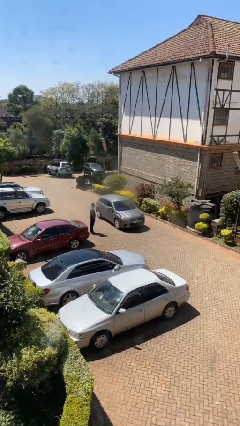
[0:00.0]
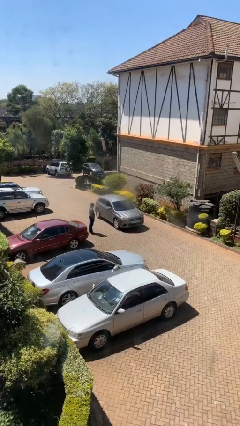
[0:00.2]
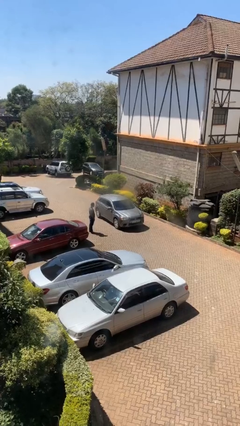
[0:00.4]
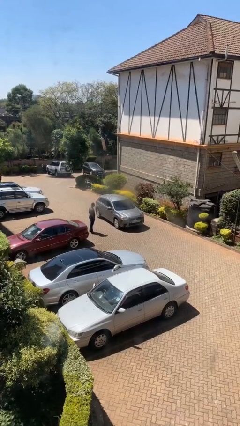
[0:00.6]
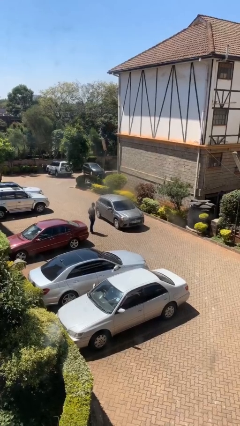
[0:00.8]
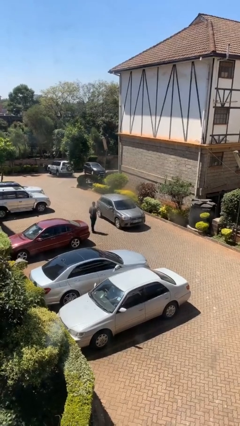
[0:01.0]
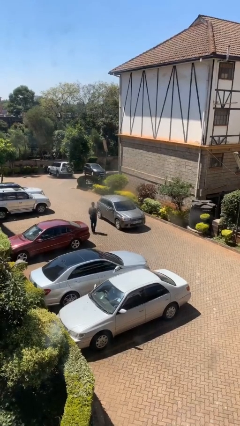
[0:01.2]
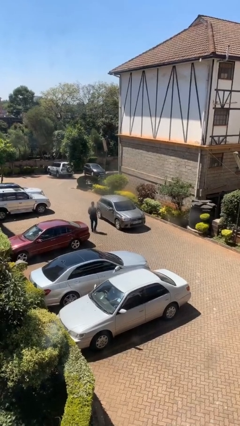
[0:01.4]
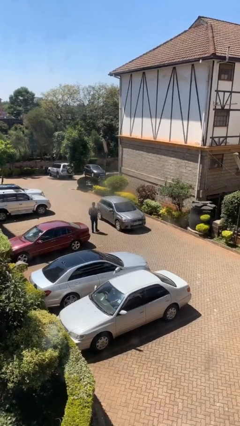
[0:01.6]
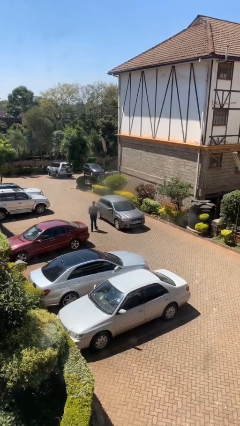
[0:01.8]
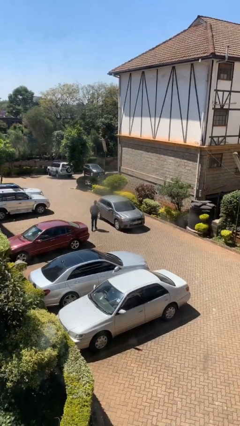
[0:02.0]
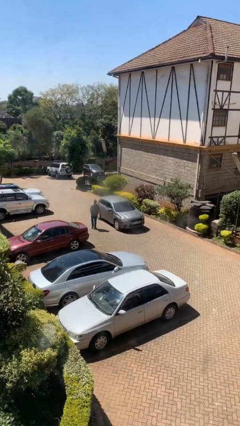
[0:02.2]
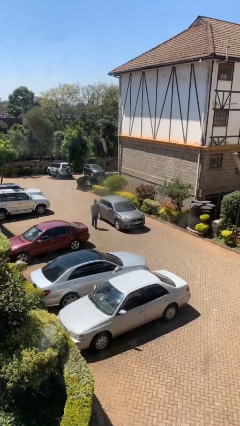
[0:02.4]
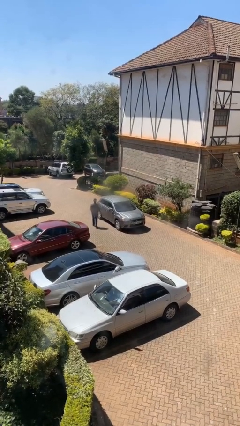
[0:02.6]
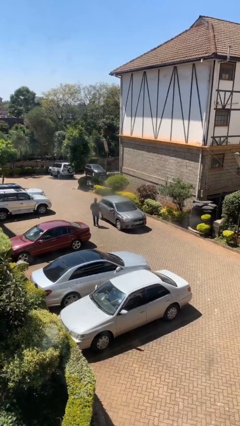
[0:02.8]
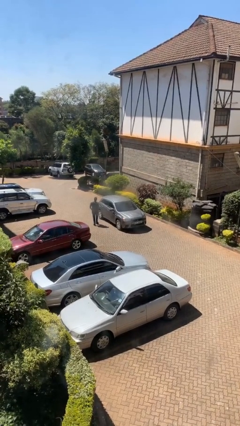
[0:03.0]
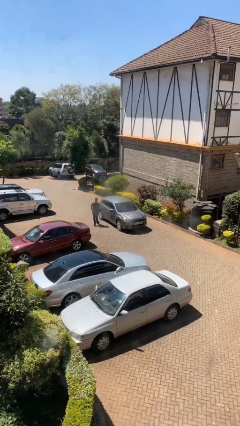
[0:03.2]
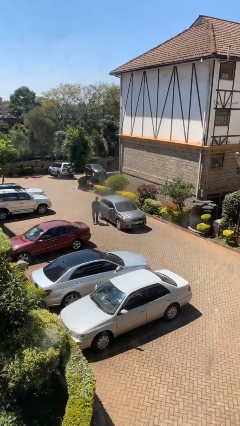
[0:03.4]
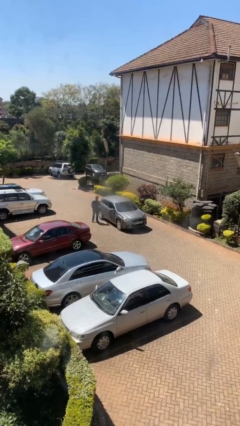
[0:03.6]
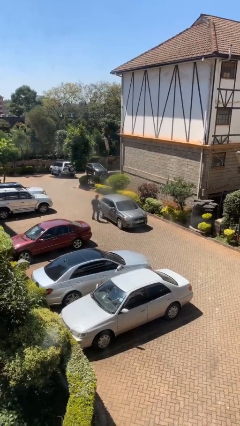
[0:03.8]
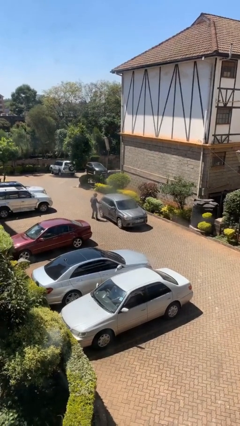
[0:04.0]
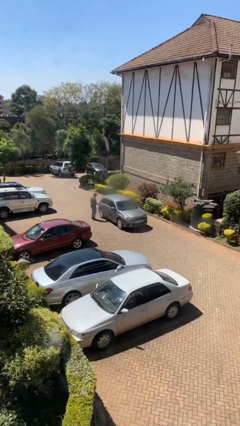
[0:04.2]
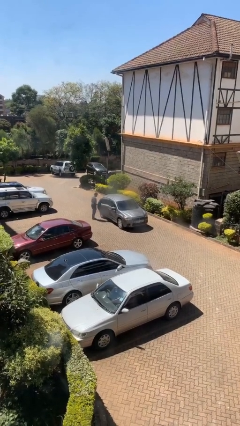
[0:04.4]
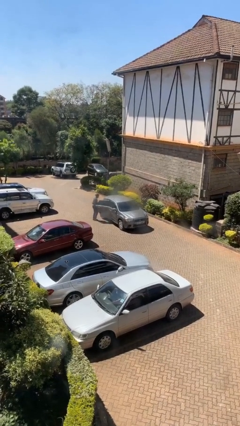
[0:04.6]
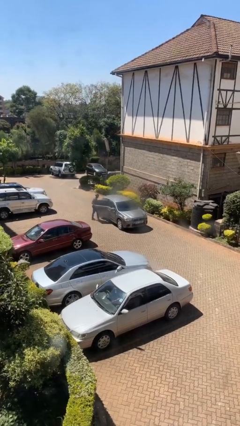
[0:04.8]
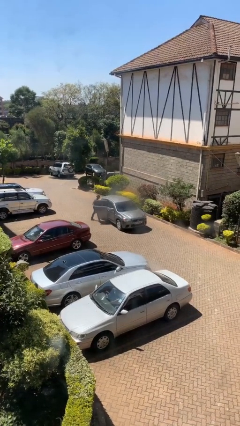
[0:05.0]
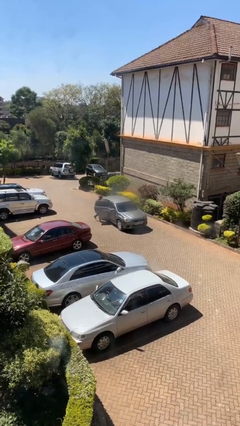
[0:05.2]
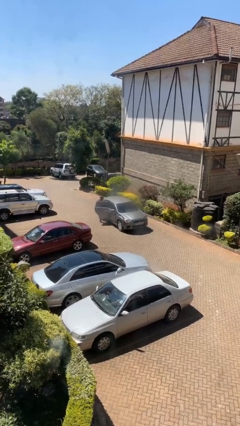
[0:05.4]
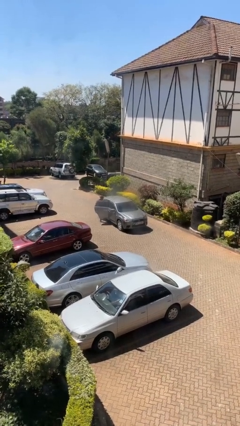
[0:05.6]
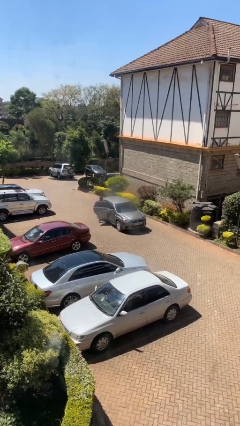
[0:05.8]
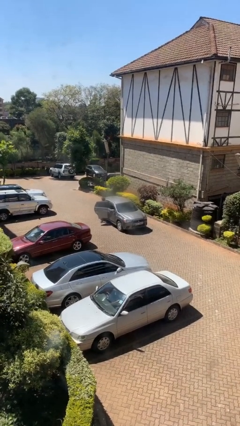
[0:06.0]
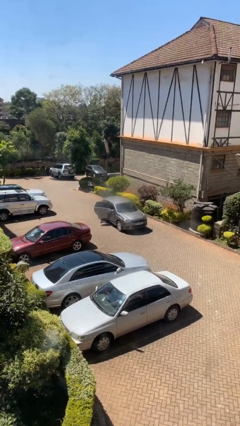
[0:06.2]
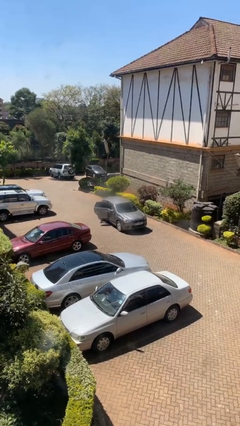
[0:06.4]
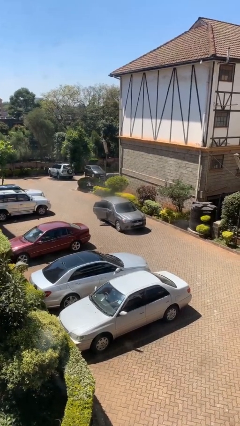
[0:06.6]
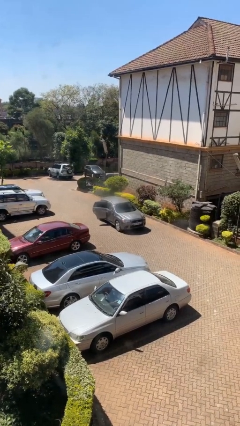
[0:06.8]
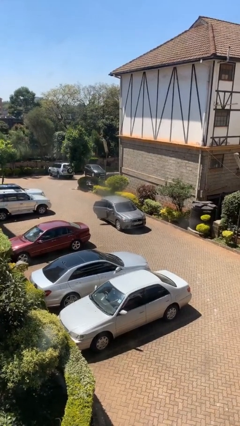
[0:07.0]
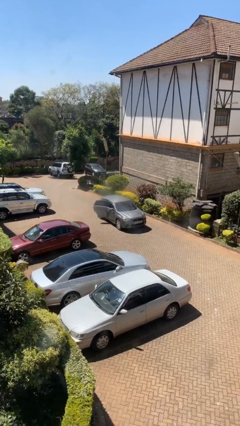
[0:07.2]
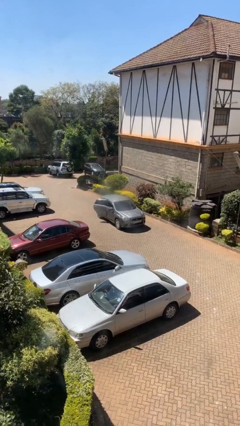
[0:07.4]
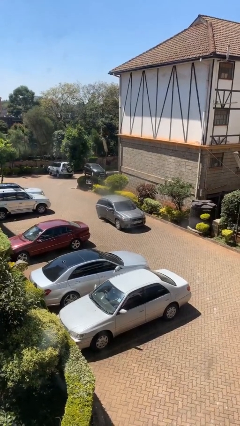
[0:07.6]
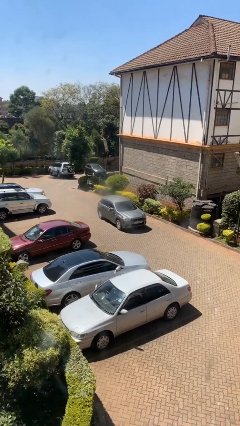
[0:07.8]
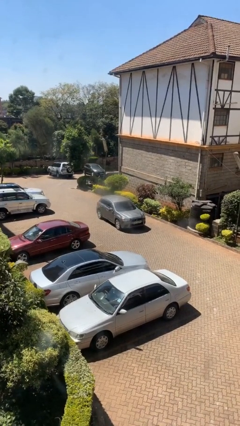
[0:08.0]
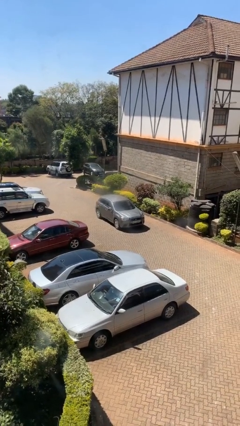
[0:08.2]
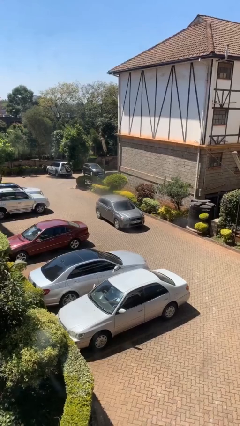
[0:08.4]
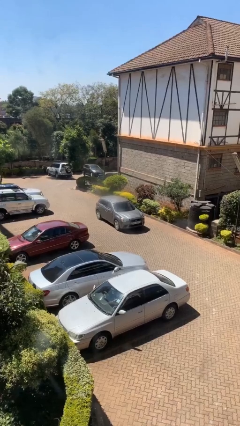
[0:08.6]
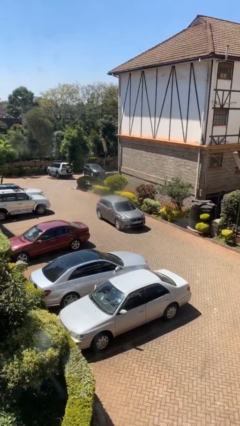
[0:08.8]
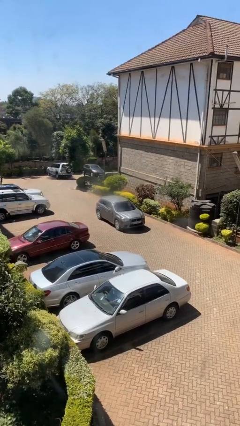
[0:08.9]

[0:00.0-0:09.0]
car picks up person

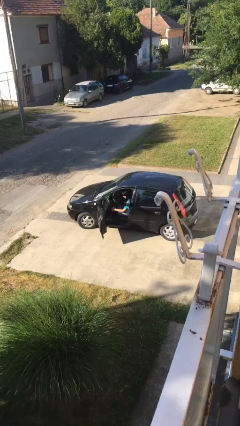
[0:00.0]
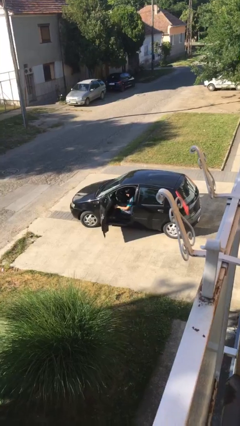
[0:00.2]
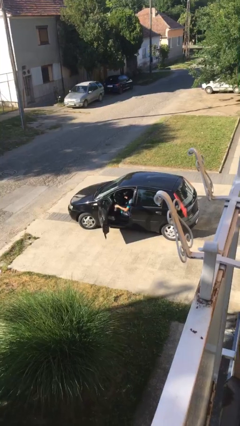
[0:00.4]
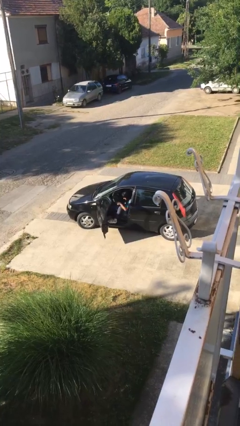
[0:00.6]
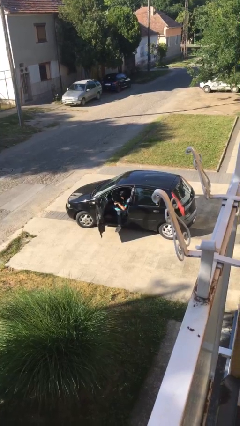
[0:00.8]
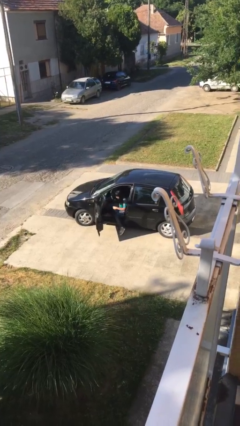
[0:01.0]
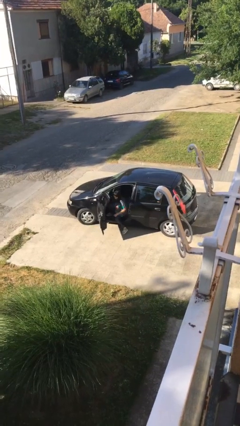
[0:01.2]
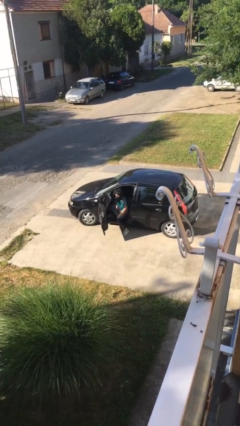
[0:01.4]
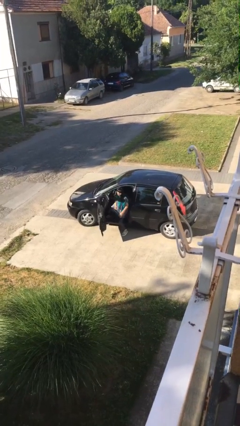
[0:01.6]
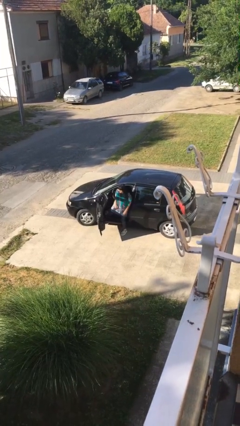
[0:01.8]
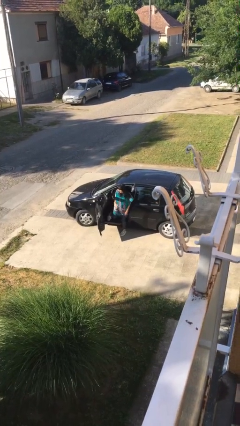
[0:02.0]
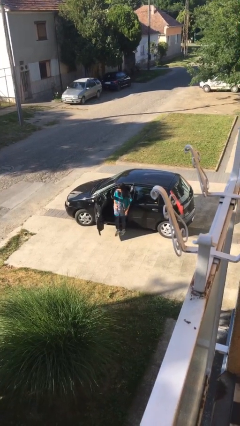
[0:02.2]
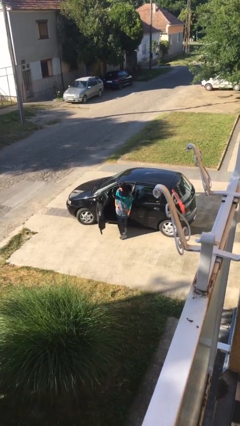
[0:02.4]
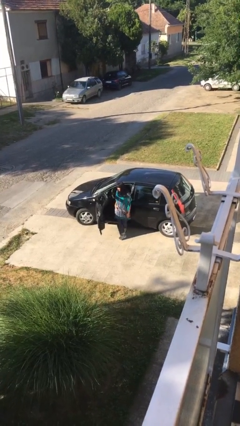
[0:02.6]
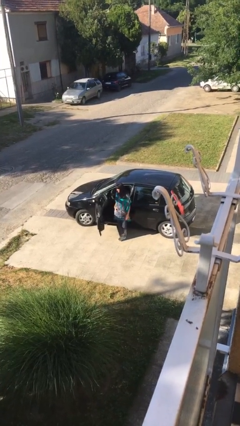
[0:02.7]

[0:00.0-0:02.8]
person exits car

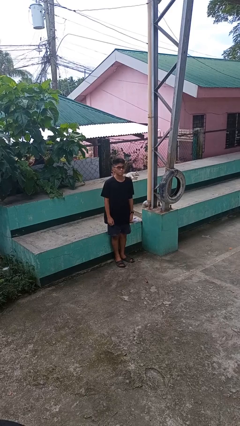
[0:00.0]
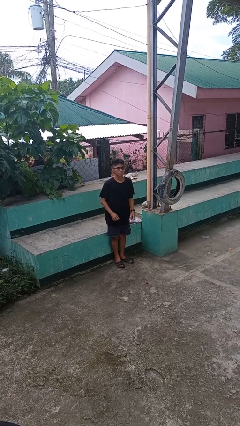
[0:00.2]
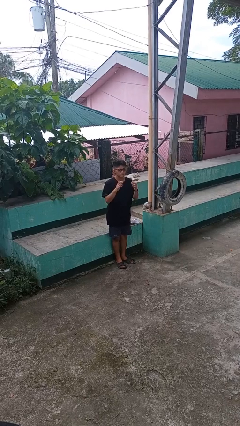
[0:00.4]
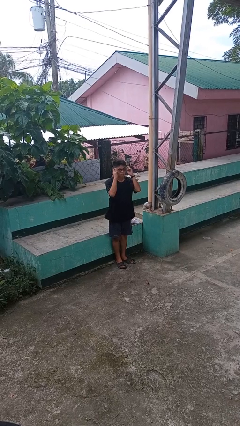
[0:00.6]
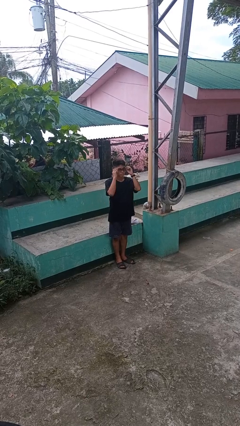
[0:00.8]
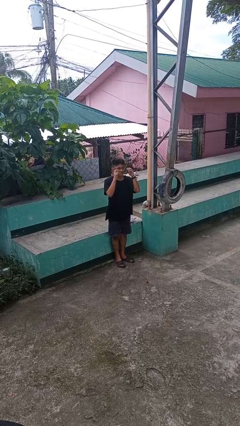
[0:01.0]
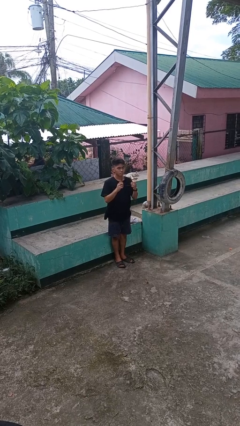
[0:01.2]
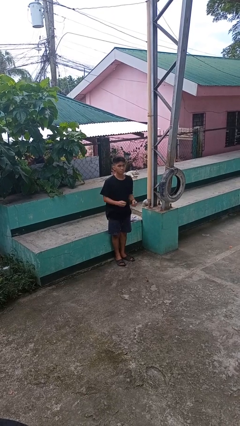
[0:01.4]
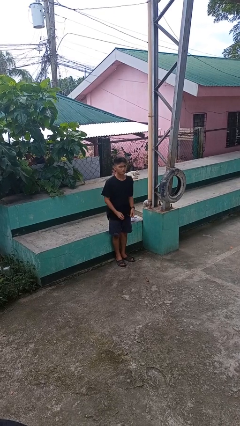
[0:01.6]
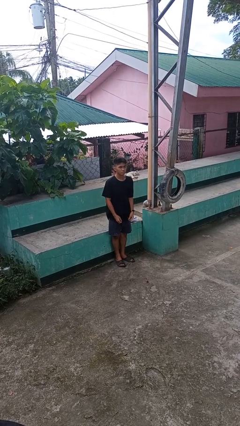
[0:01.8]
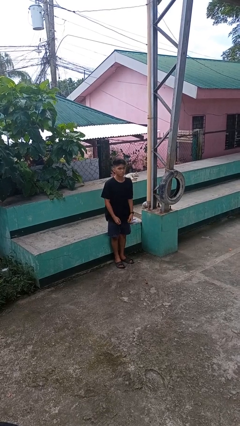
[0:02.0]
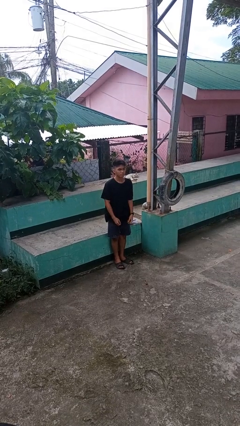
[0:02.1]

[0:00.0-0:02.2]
person takes off glasses

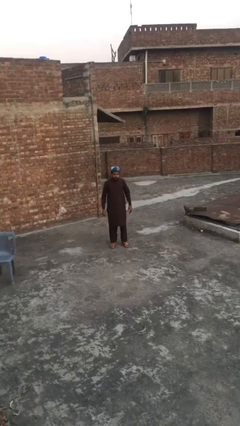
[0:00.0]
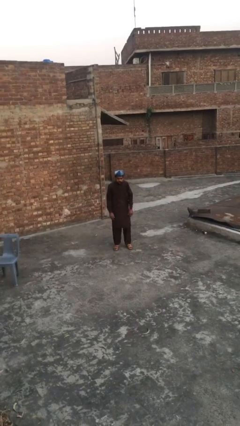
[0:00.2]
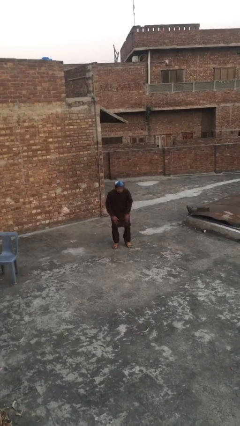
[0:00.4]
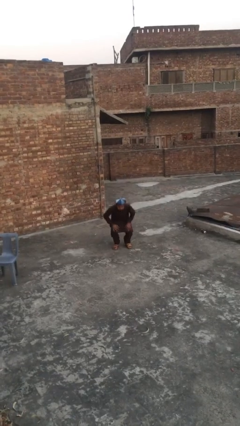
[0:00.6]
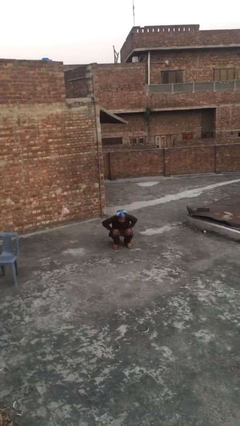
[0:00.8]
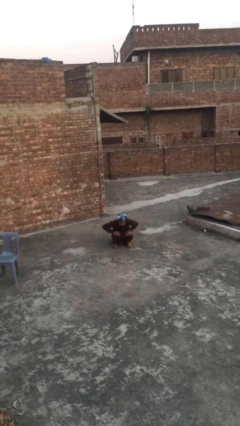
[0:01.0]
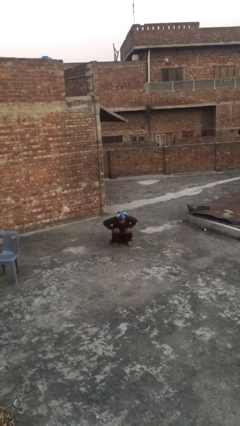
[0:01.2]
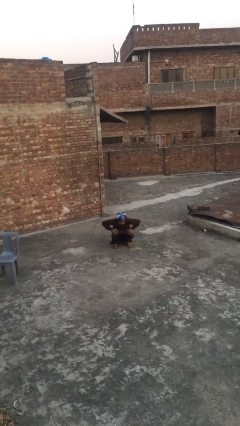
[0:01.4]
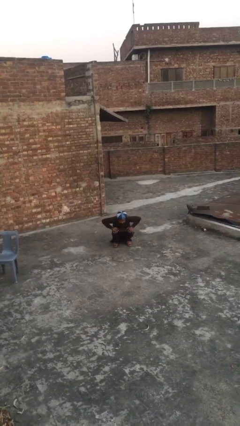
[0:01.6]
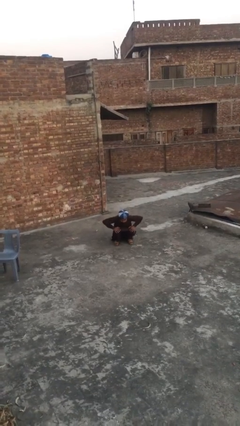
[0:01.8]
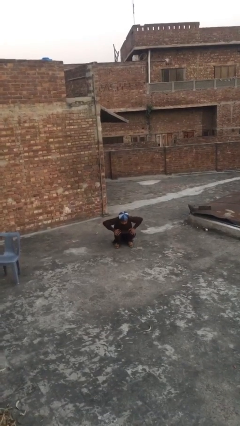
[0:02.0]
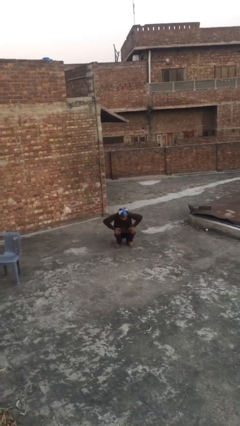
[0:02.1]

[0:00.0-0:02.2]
person sits down

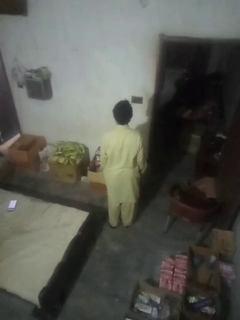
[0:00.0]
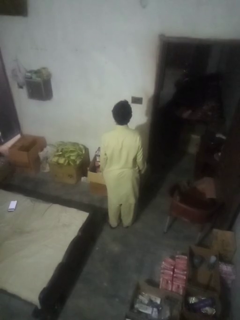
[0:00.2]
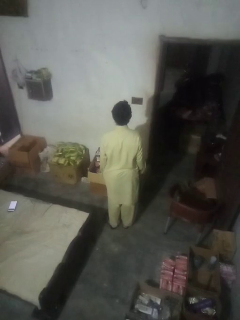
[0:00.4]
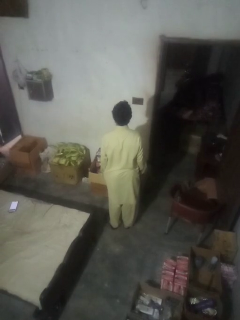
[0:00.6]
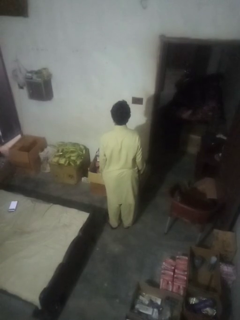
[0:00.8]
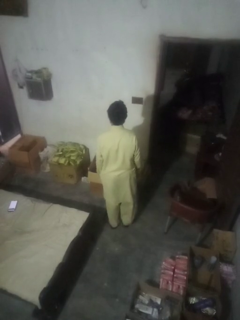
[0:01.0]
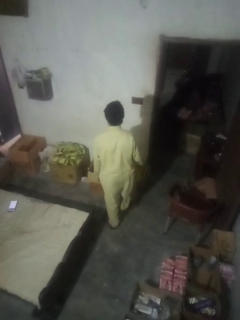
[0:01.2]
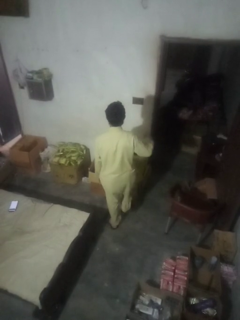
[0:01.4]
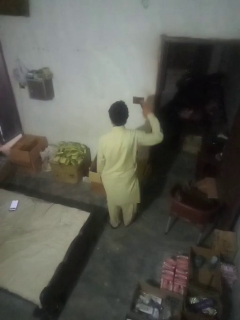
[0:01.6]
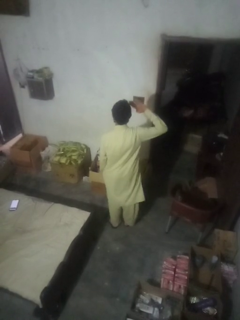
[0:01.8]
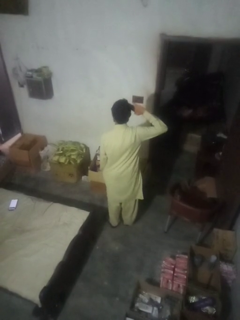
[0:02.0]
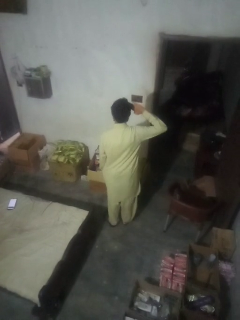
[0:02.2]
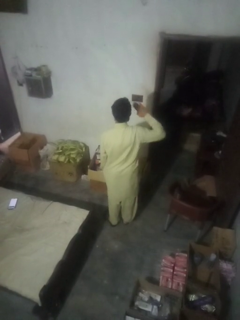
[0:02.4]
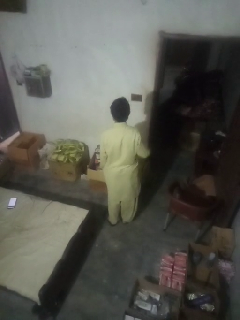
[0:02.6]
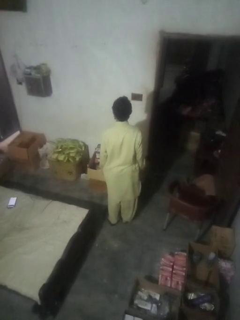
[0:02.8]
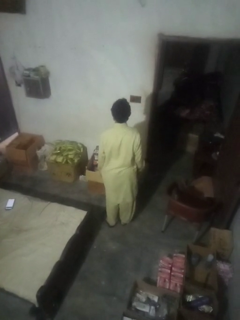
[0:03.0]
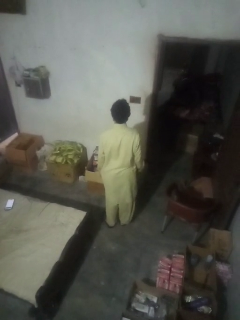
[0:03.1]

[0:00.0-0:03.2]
person salutes
